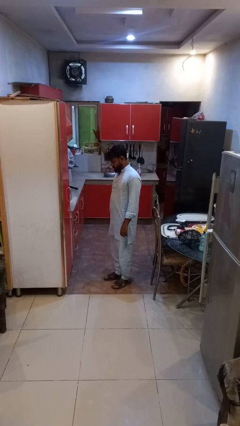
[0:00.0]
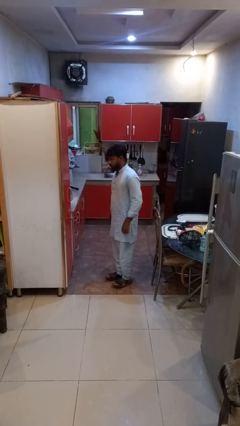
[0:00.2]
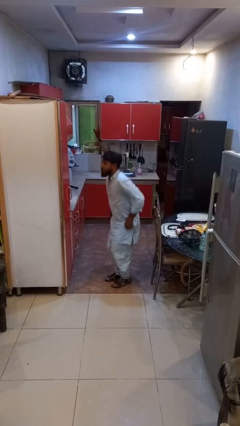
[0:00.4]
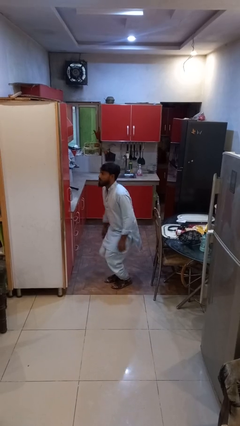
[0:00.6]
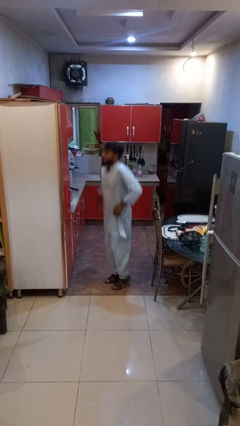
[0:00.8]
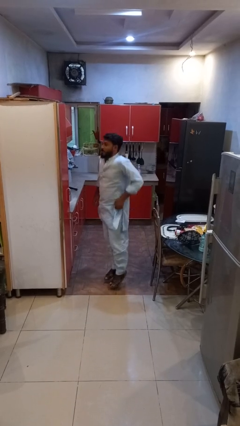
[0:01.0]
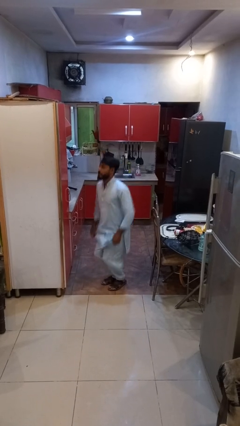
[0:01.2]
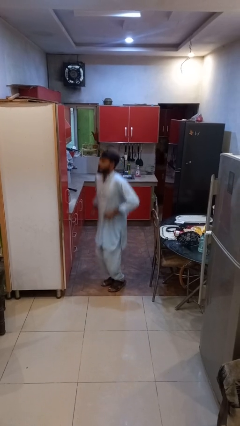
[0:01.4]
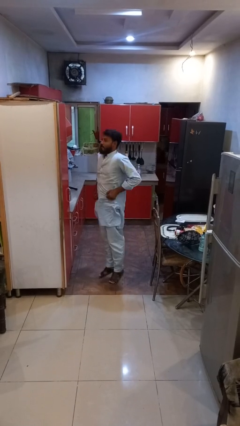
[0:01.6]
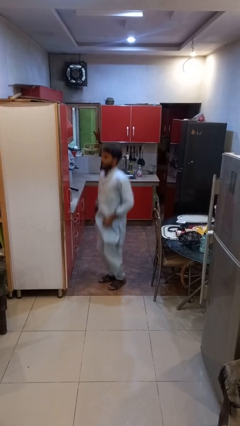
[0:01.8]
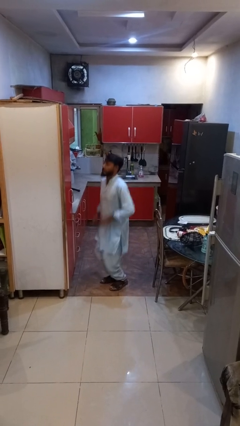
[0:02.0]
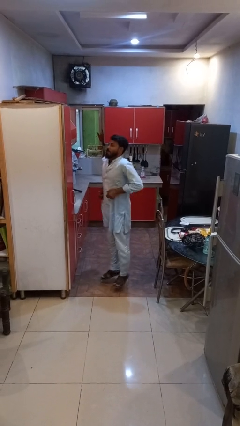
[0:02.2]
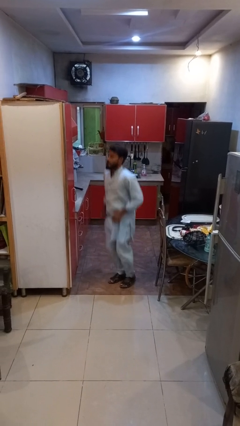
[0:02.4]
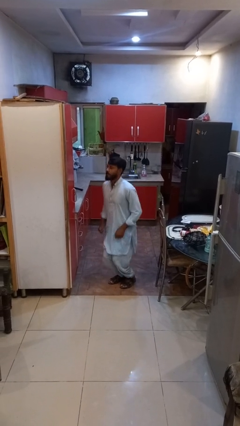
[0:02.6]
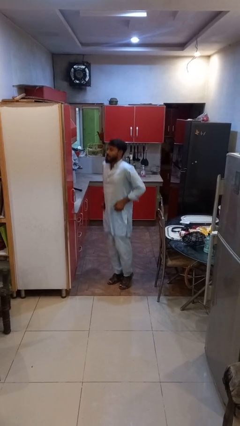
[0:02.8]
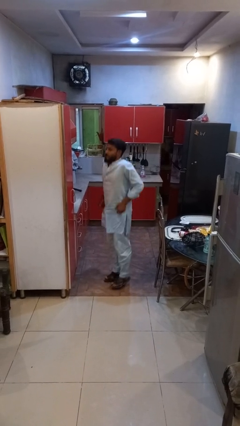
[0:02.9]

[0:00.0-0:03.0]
person jumps

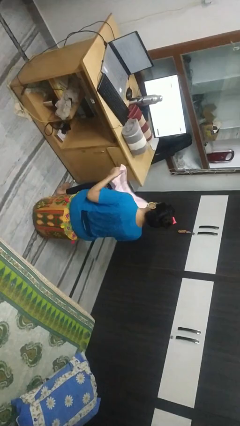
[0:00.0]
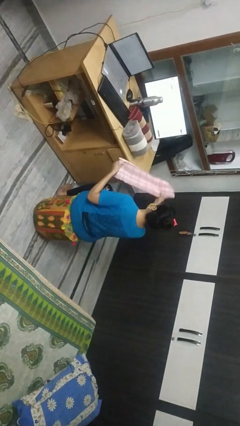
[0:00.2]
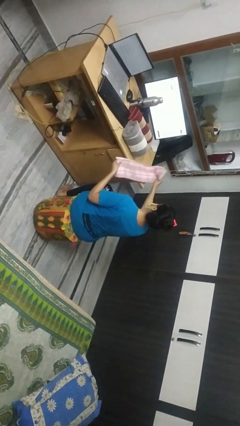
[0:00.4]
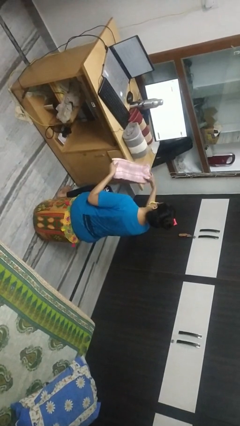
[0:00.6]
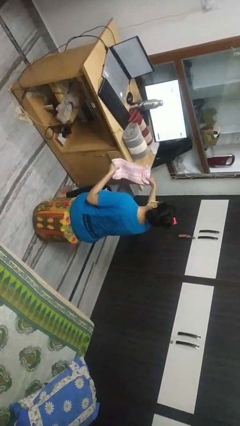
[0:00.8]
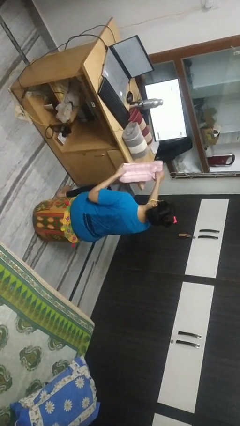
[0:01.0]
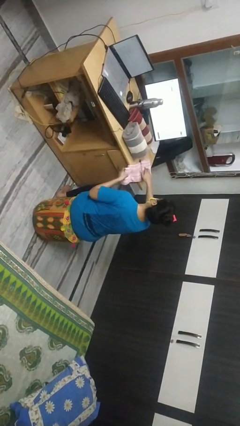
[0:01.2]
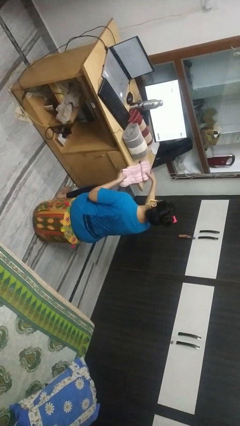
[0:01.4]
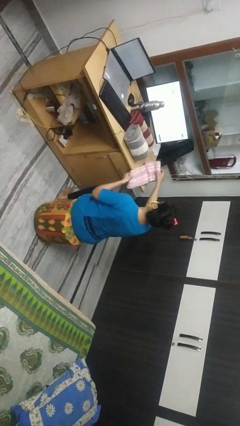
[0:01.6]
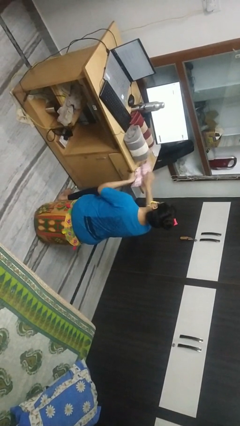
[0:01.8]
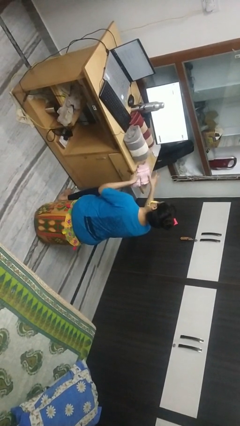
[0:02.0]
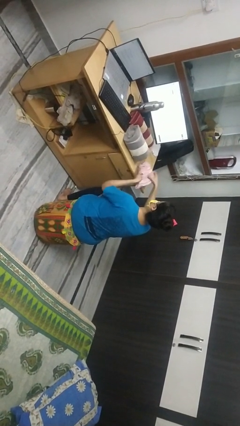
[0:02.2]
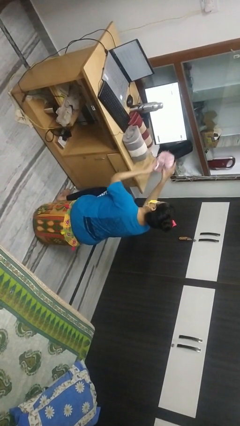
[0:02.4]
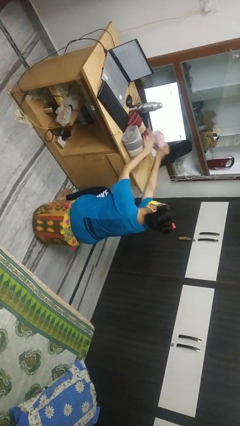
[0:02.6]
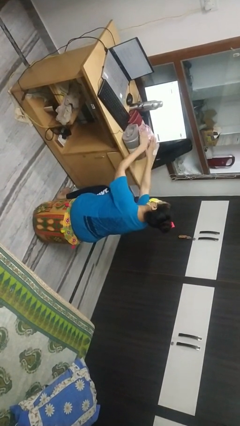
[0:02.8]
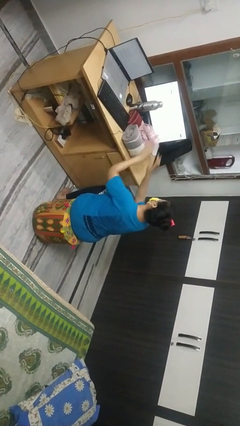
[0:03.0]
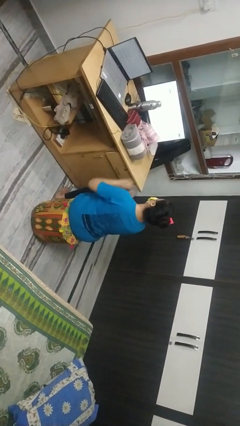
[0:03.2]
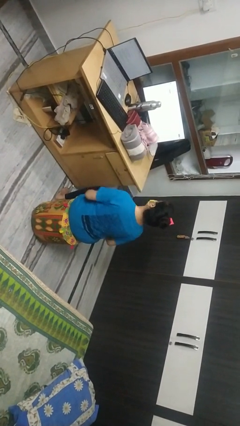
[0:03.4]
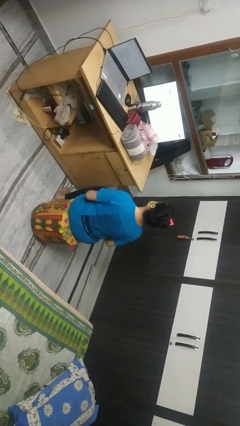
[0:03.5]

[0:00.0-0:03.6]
person folds towel

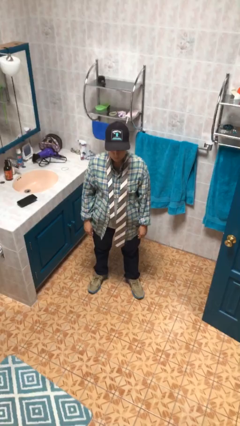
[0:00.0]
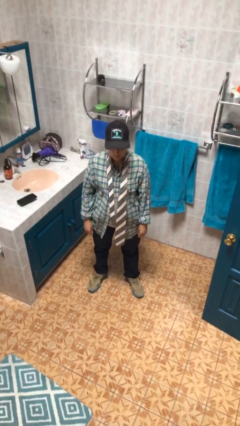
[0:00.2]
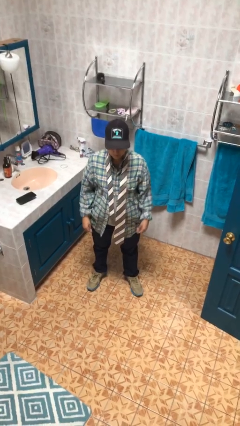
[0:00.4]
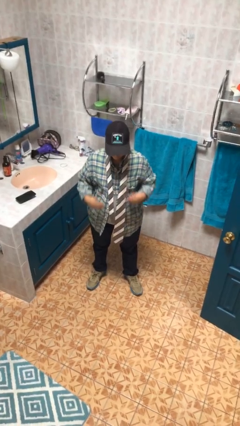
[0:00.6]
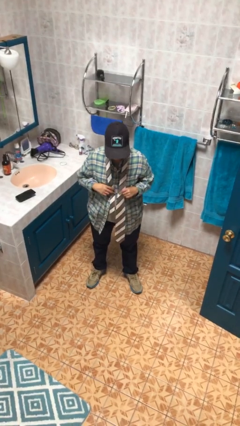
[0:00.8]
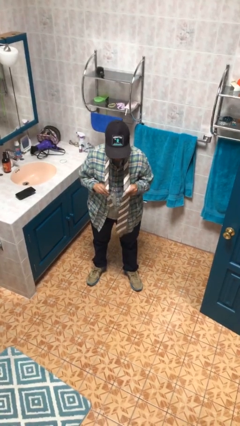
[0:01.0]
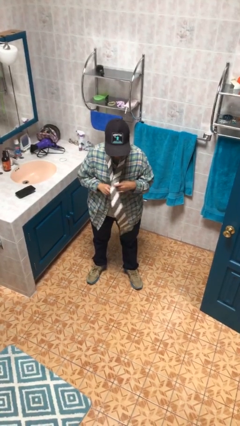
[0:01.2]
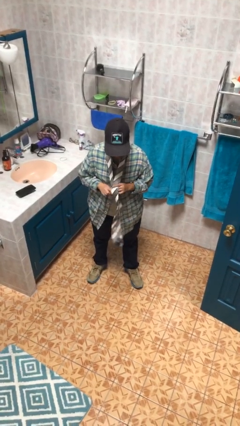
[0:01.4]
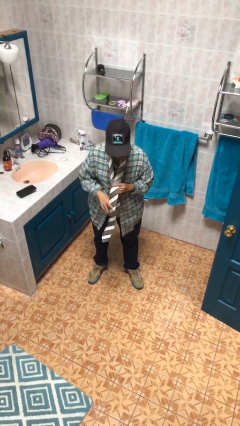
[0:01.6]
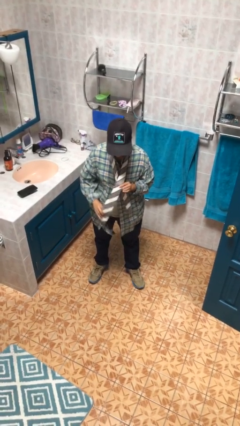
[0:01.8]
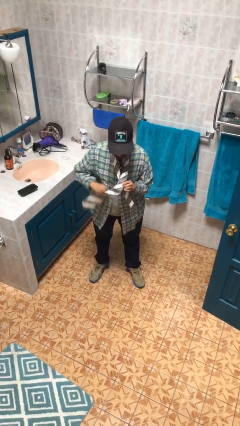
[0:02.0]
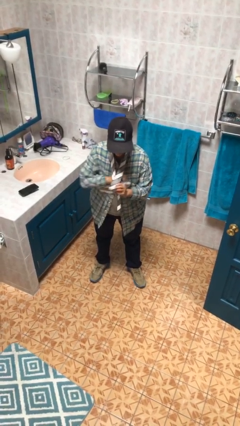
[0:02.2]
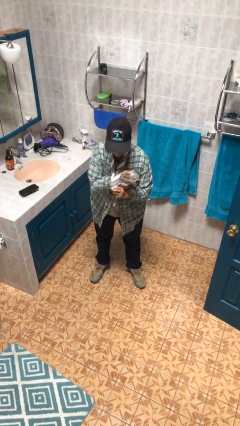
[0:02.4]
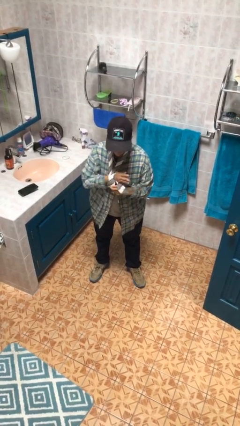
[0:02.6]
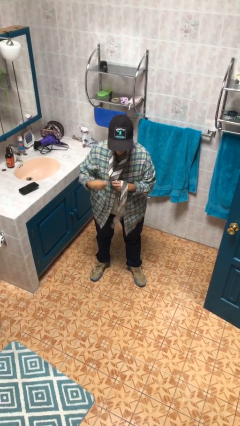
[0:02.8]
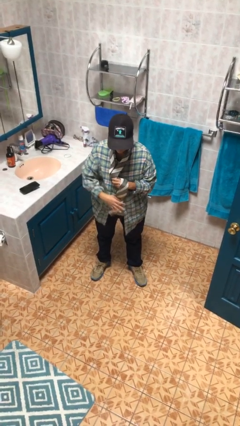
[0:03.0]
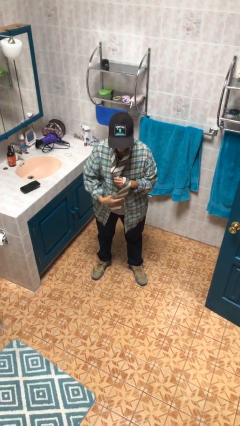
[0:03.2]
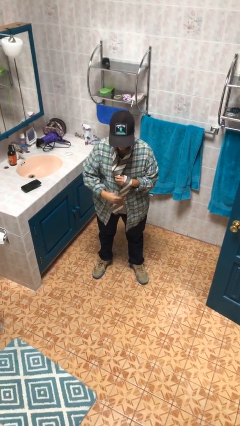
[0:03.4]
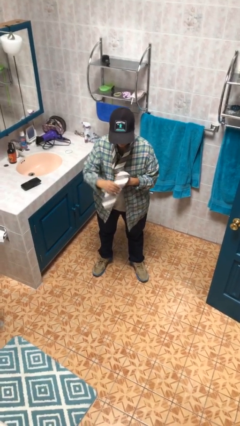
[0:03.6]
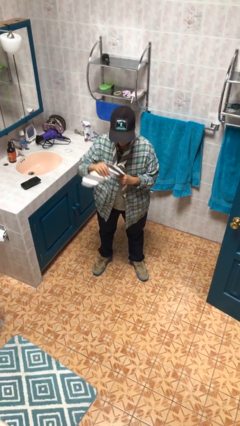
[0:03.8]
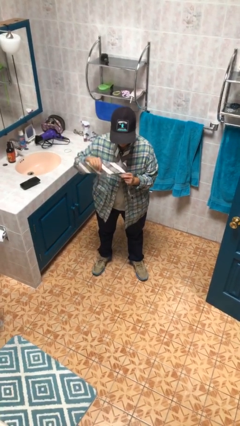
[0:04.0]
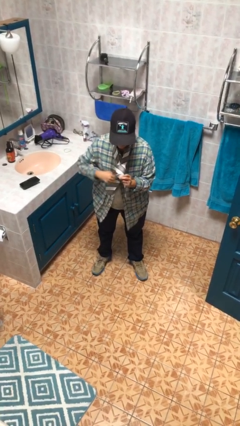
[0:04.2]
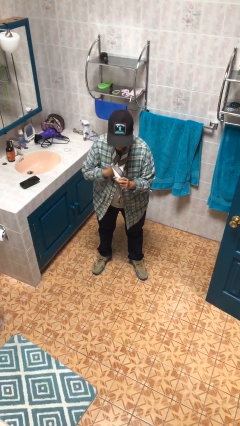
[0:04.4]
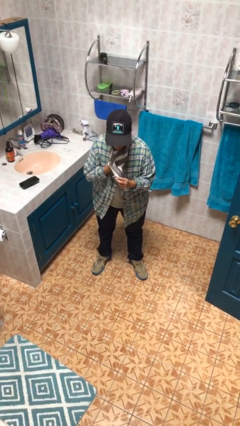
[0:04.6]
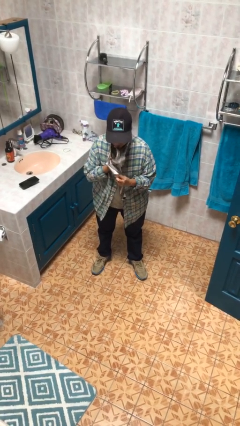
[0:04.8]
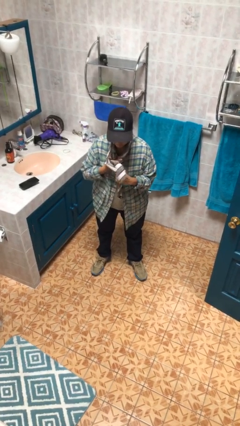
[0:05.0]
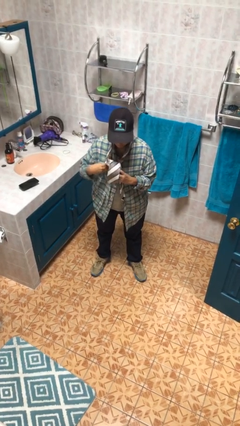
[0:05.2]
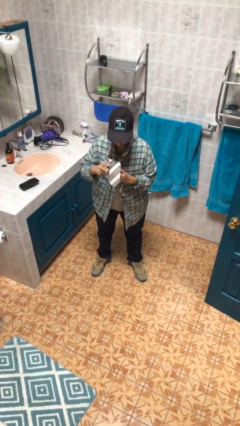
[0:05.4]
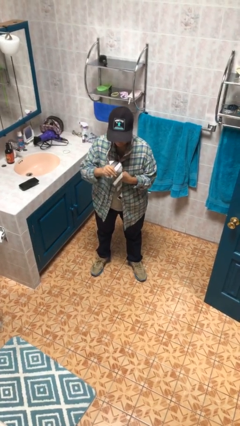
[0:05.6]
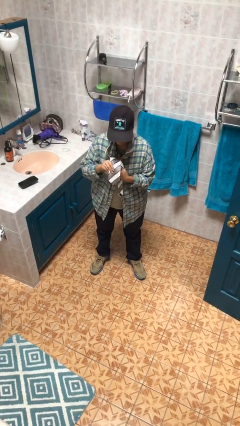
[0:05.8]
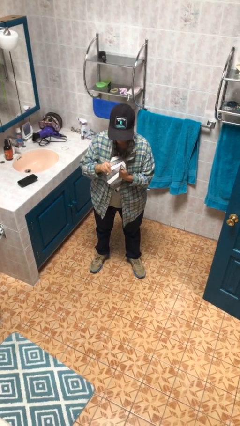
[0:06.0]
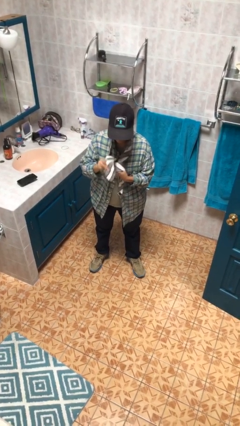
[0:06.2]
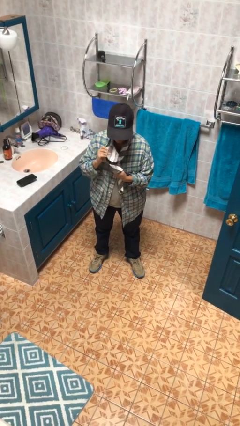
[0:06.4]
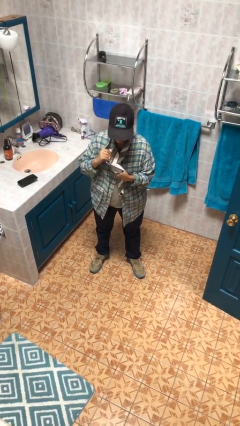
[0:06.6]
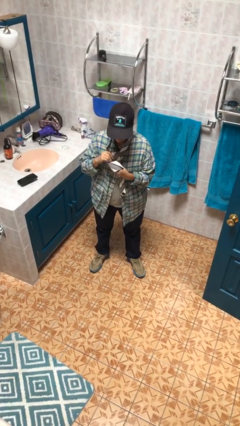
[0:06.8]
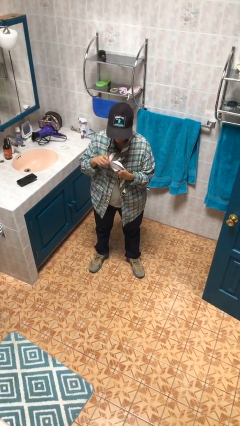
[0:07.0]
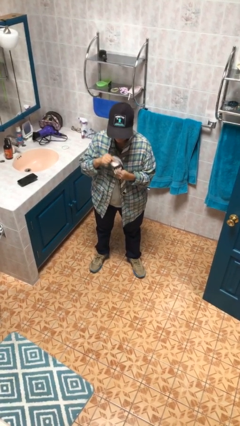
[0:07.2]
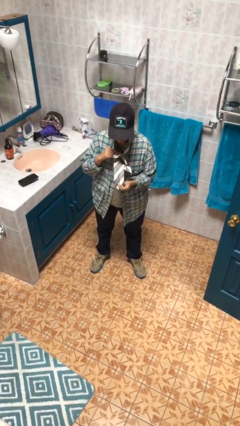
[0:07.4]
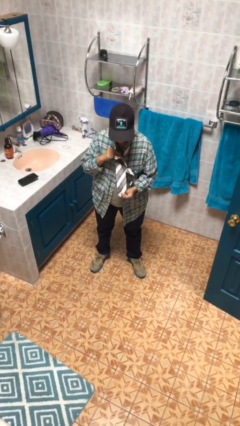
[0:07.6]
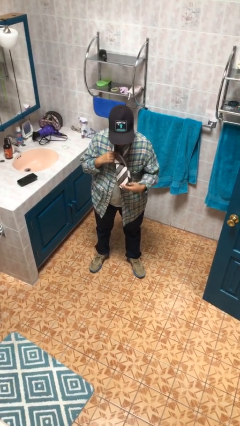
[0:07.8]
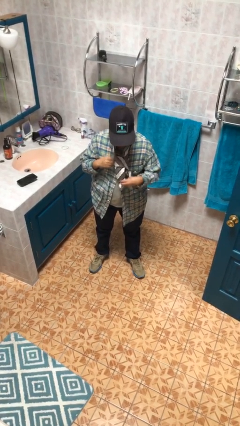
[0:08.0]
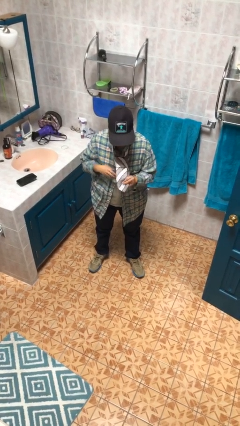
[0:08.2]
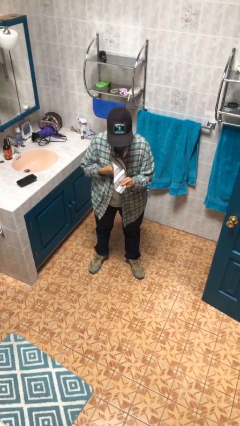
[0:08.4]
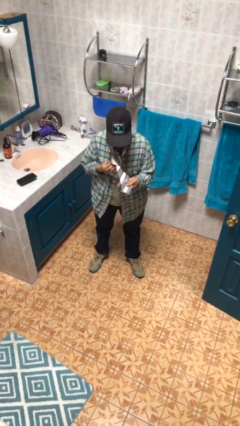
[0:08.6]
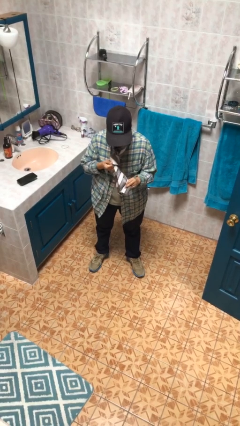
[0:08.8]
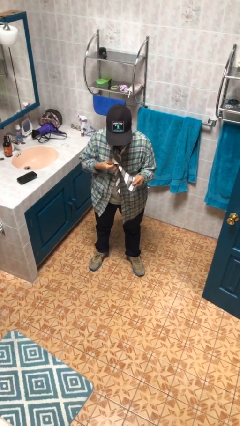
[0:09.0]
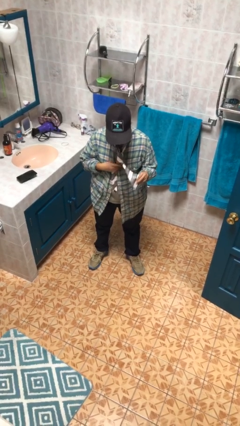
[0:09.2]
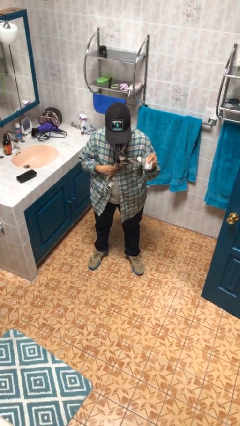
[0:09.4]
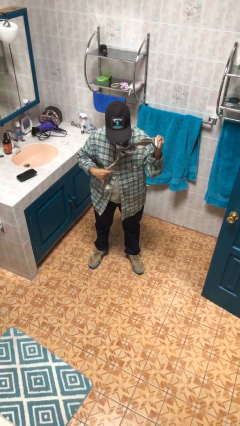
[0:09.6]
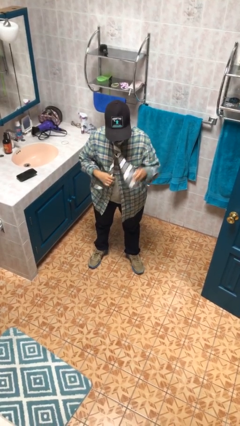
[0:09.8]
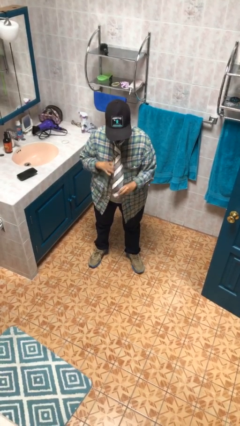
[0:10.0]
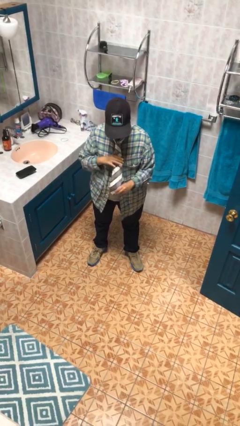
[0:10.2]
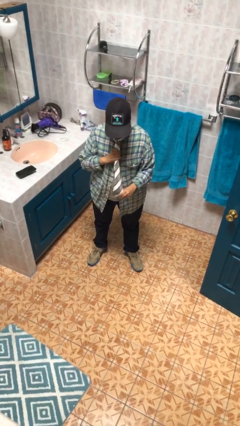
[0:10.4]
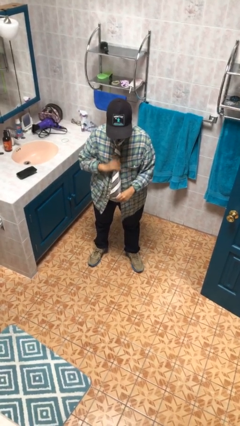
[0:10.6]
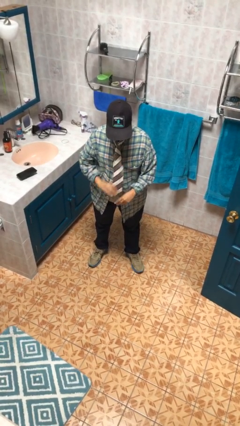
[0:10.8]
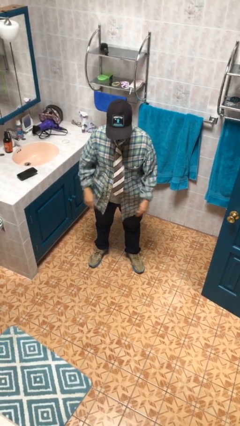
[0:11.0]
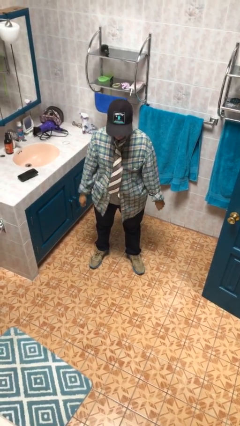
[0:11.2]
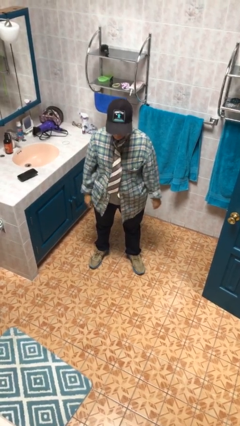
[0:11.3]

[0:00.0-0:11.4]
person puts on necktie
